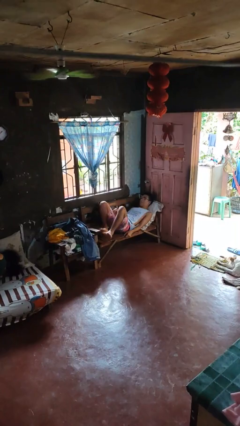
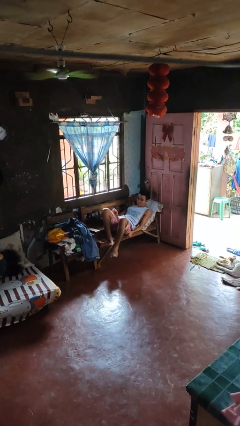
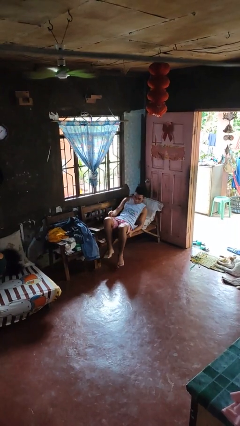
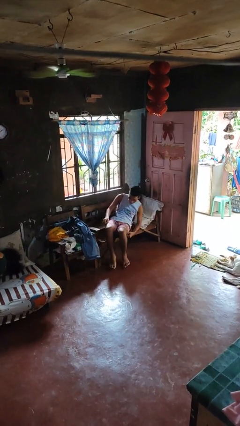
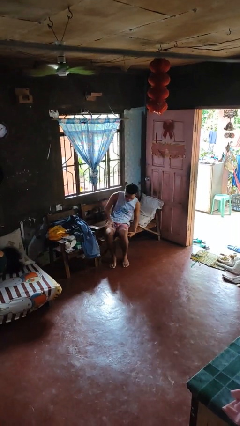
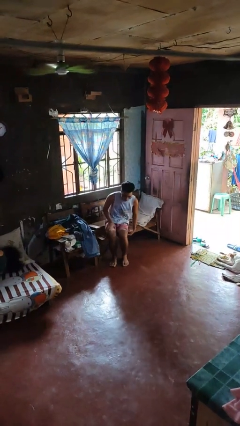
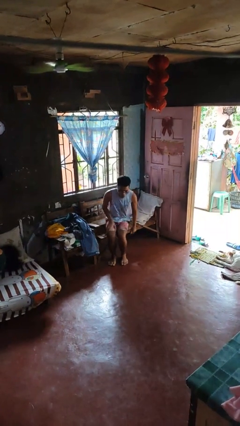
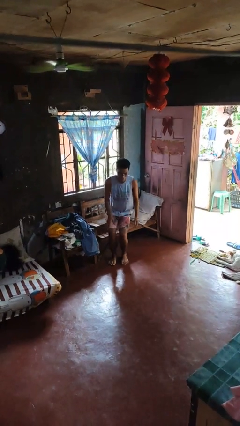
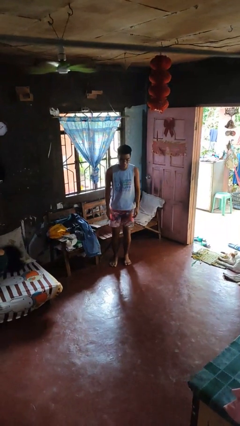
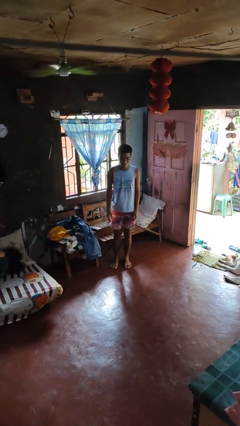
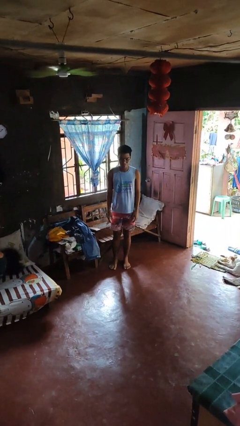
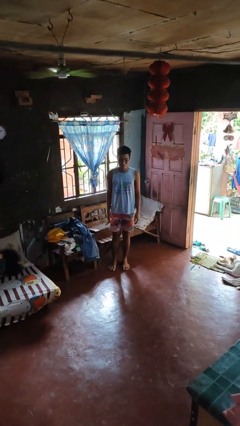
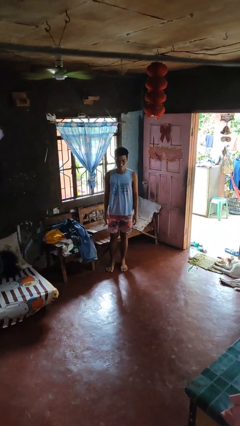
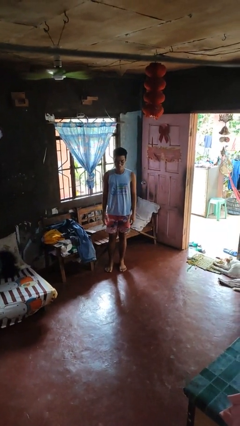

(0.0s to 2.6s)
person stands up

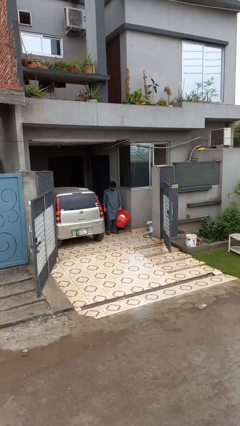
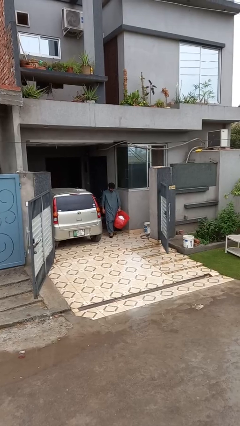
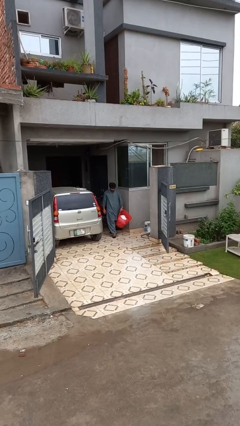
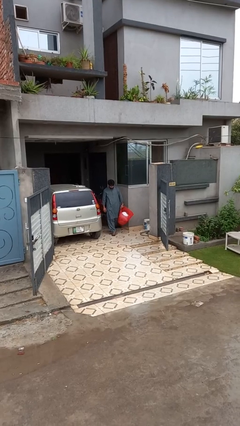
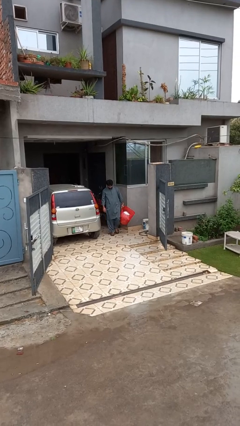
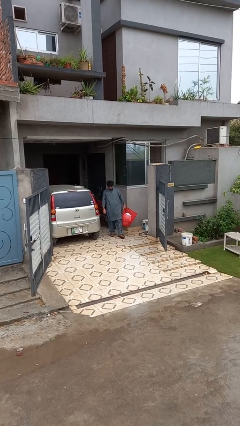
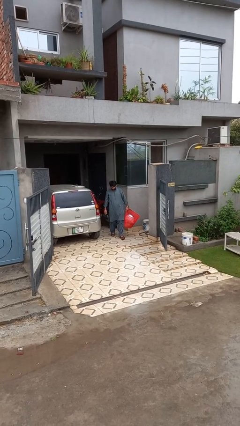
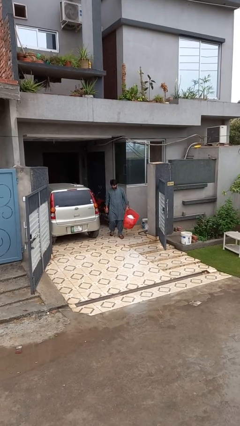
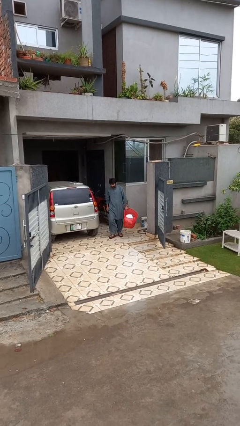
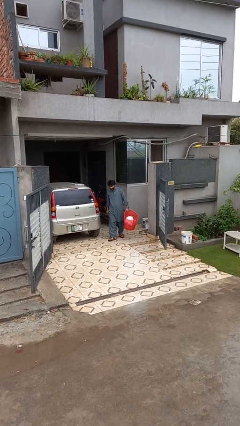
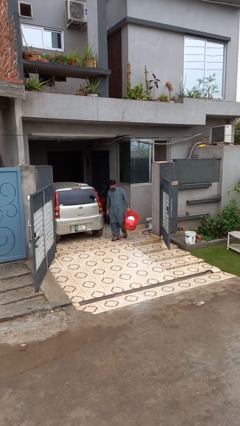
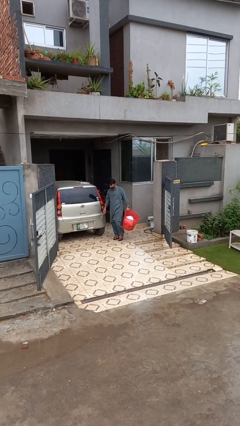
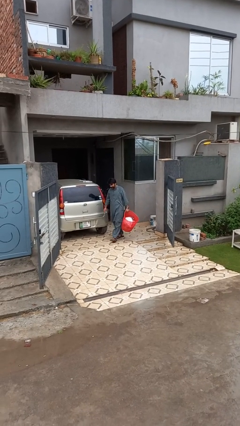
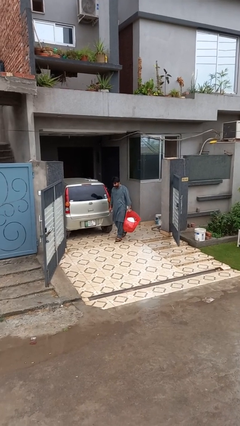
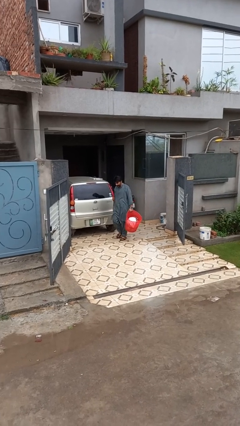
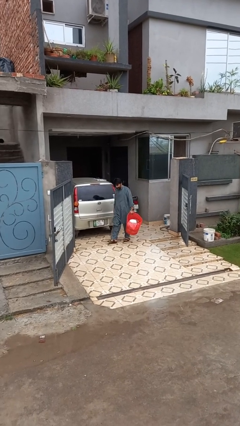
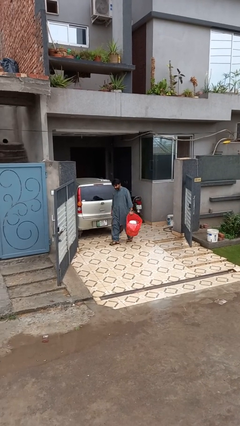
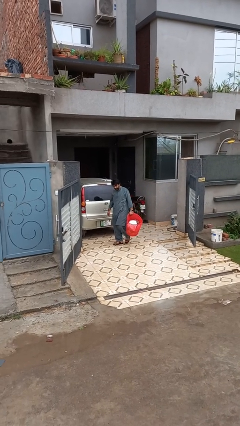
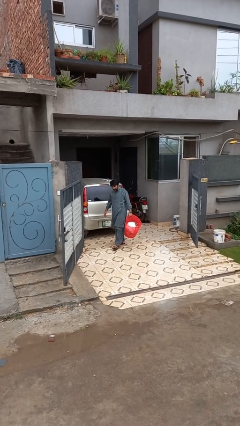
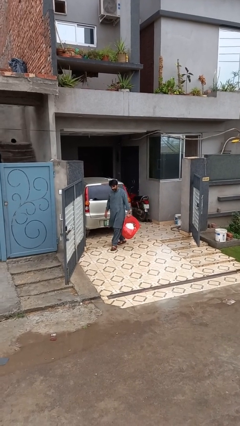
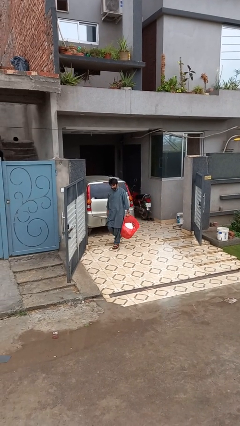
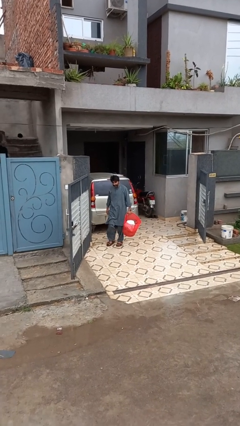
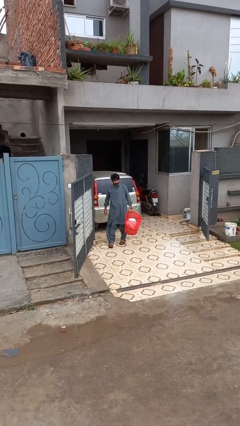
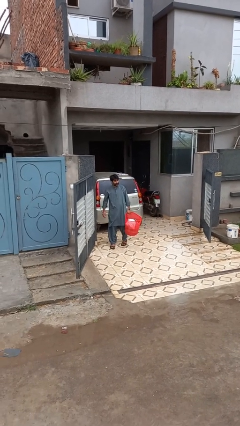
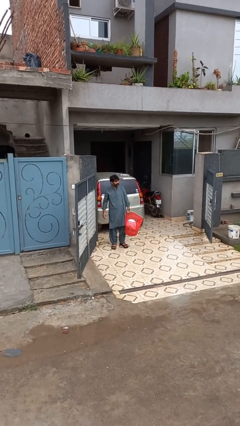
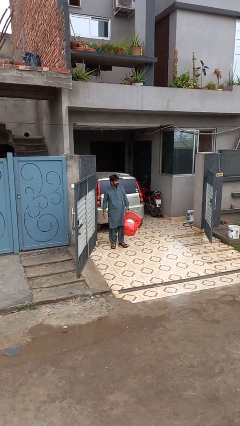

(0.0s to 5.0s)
person carries laundry basket

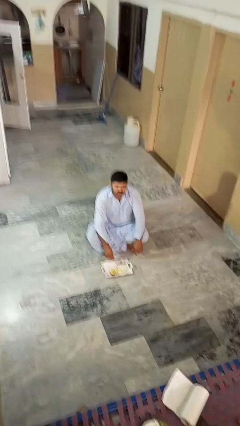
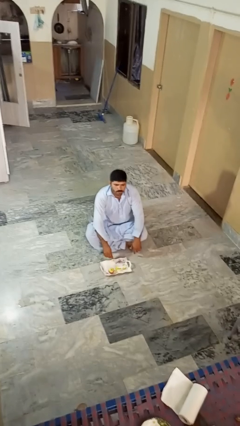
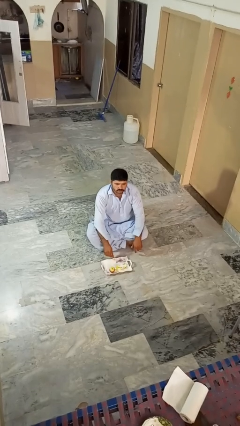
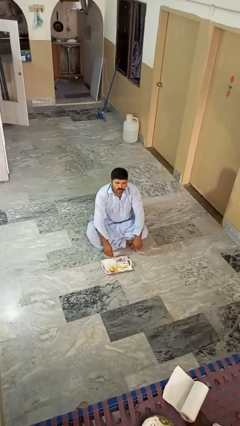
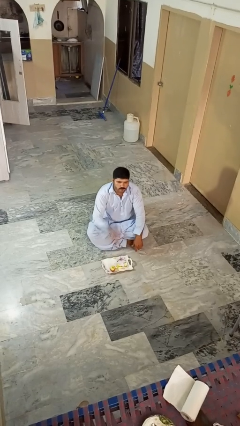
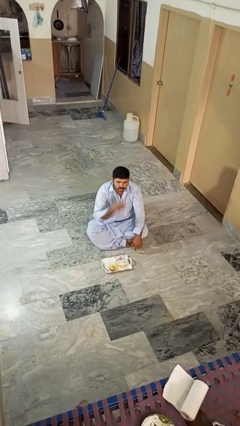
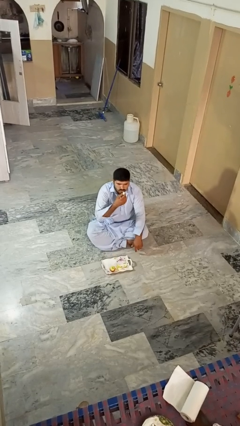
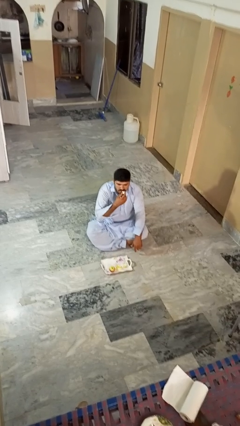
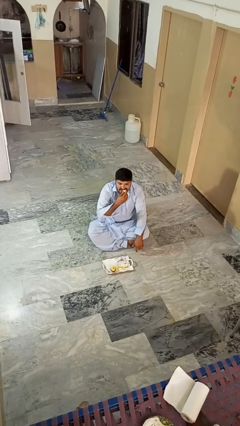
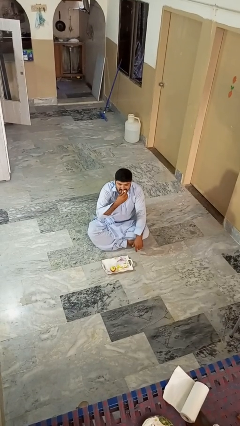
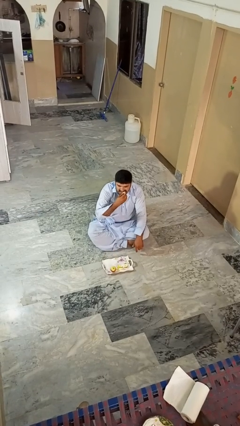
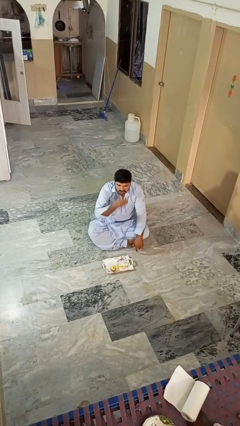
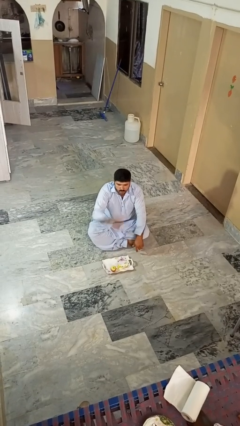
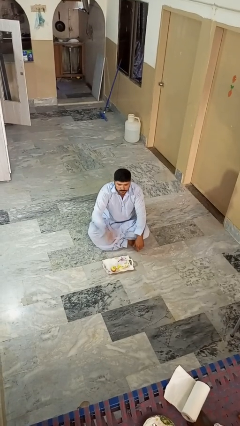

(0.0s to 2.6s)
person eats apple

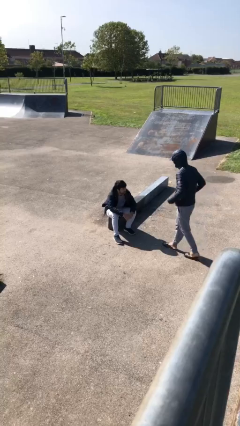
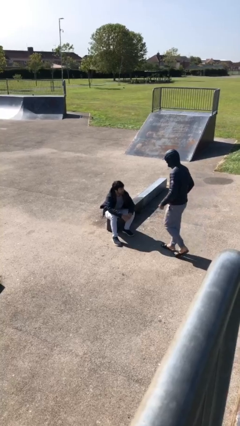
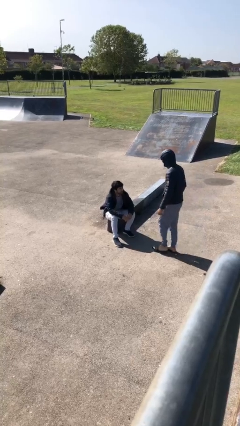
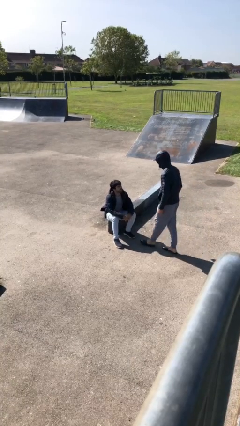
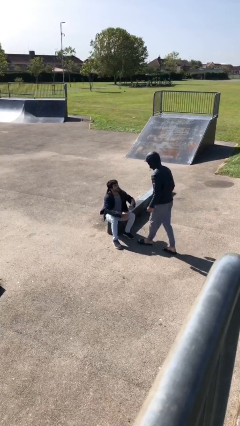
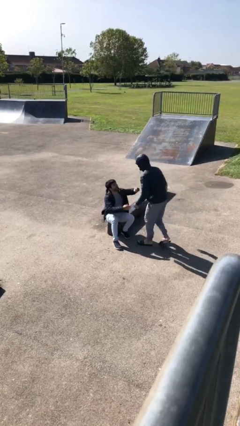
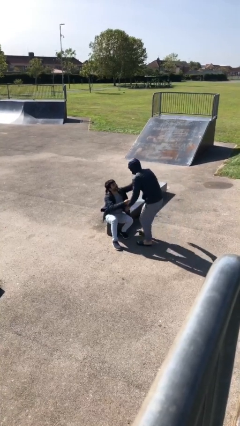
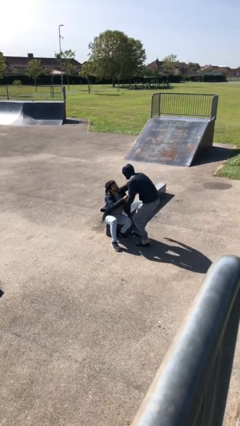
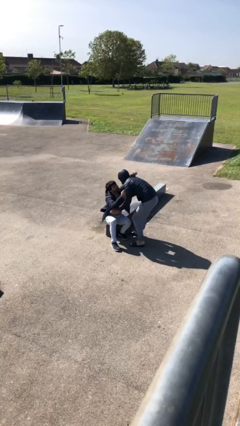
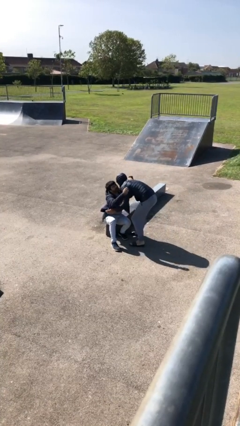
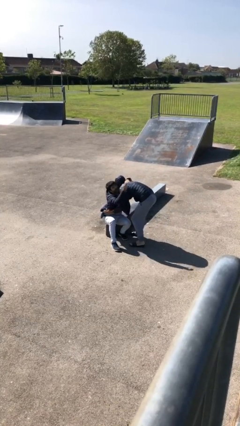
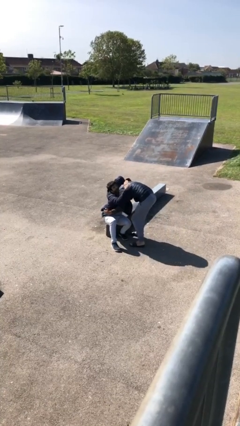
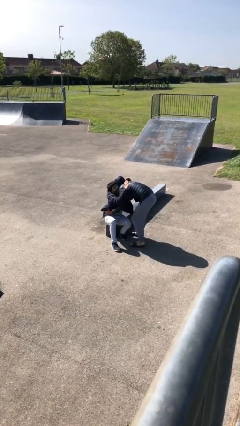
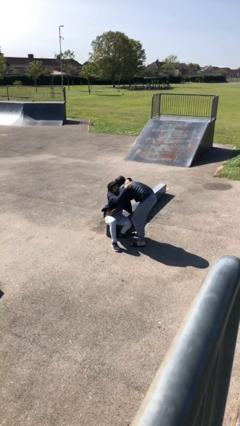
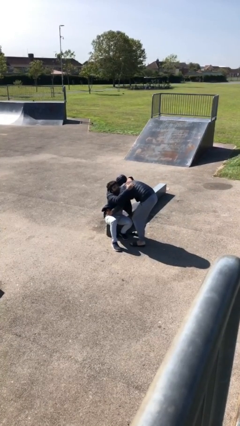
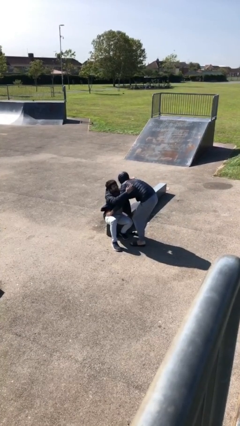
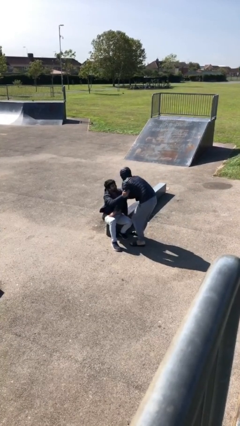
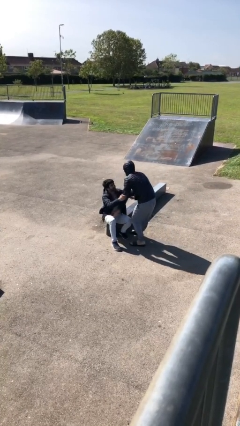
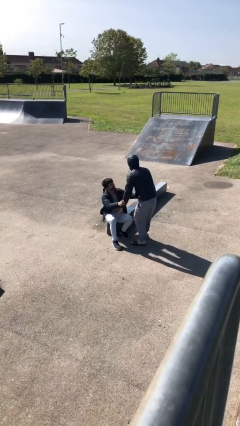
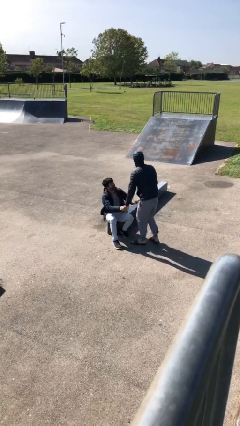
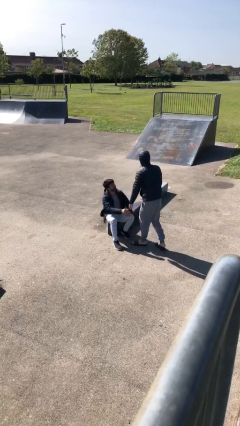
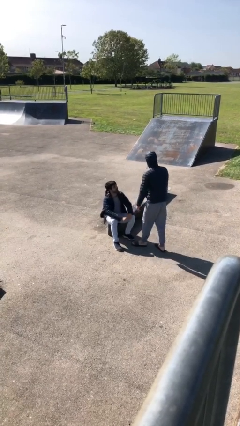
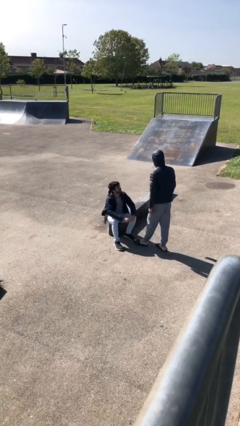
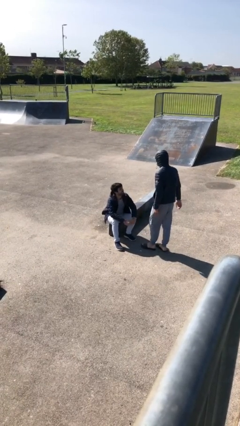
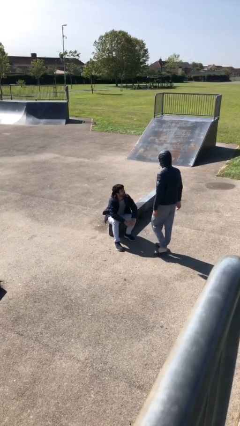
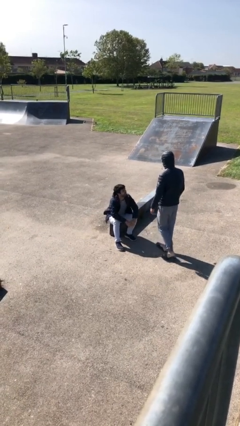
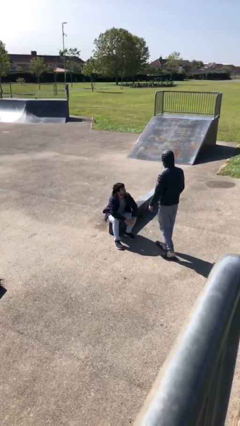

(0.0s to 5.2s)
person embraces person

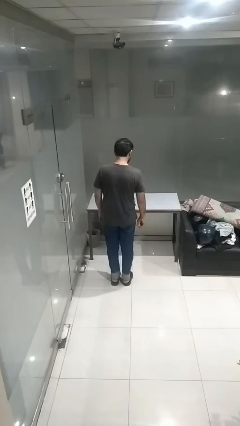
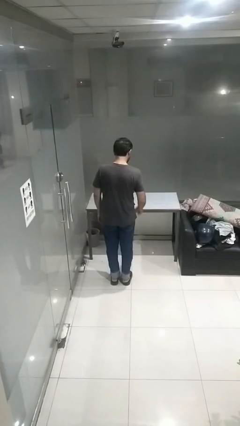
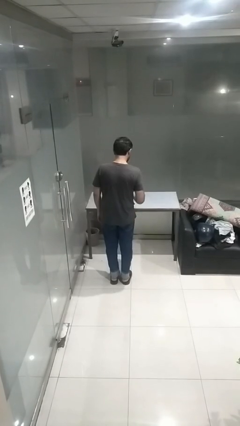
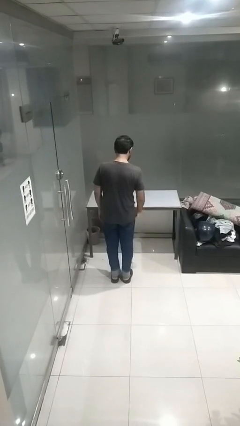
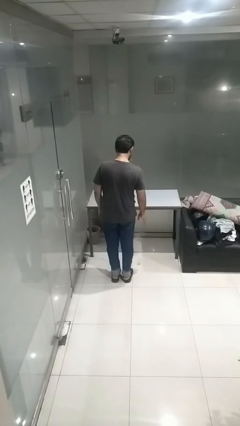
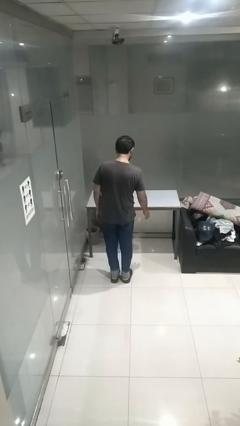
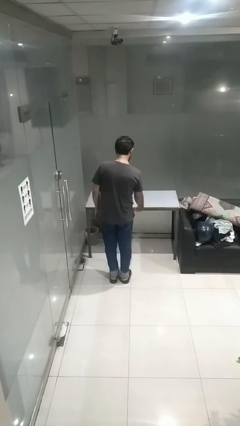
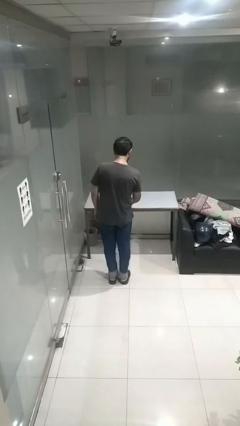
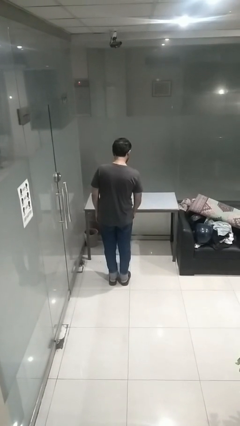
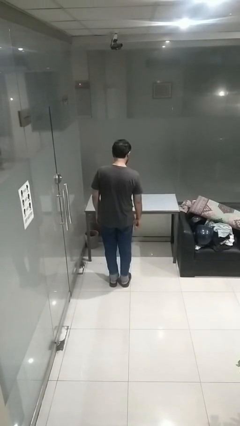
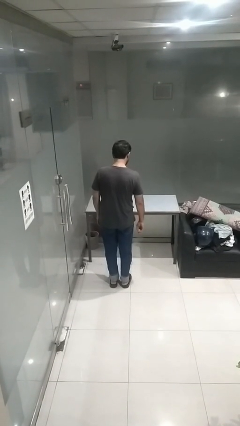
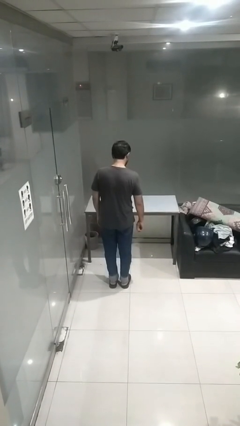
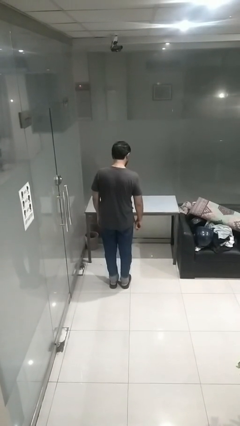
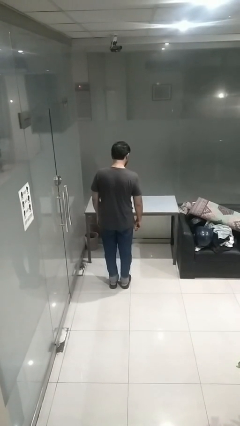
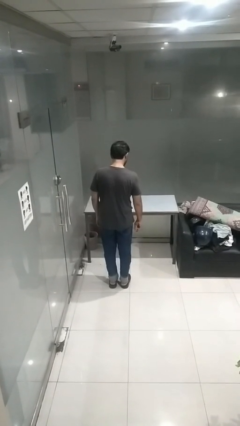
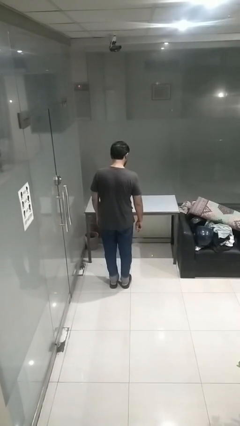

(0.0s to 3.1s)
person bounces ball on floor
